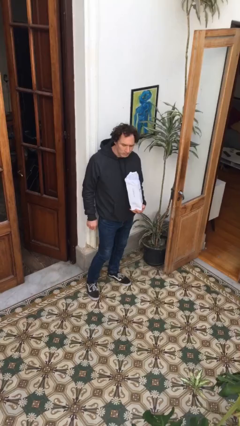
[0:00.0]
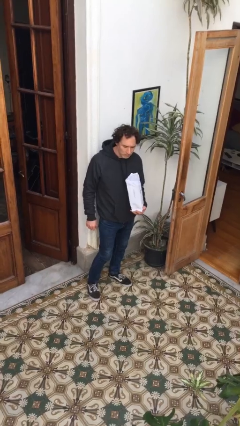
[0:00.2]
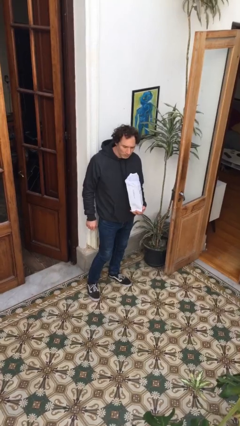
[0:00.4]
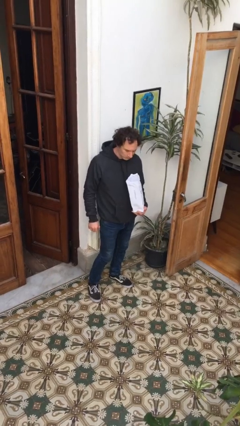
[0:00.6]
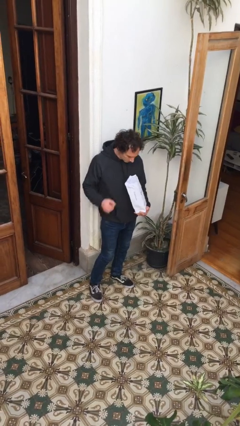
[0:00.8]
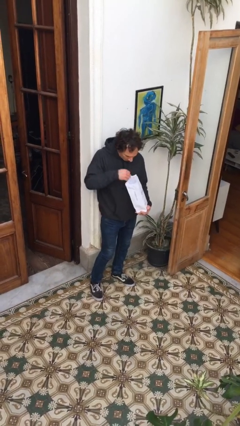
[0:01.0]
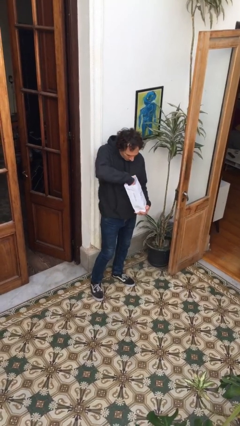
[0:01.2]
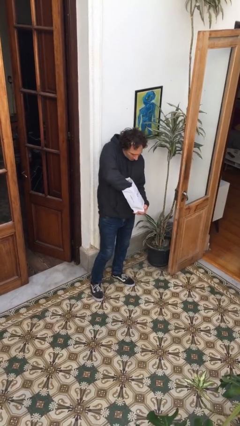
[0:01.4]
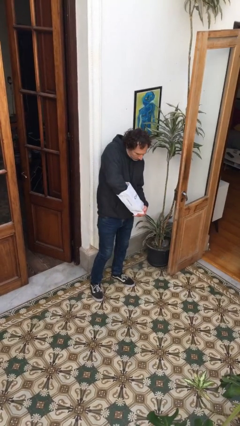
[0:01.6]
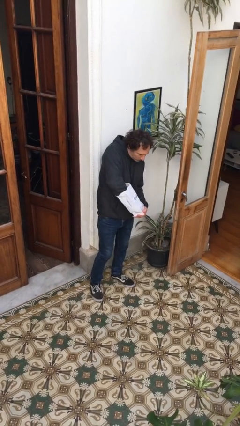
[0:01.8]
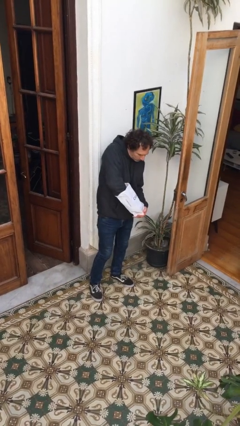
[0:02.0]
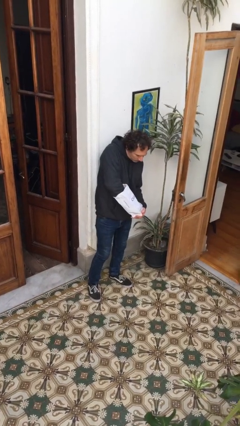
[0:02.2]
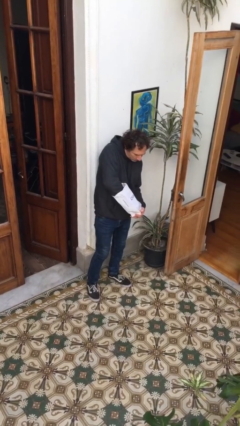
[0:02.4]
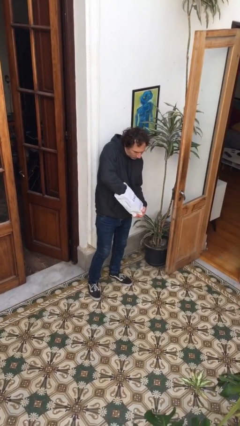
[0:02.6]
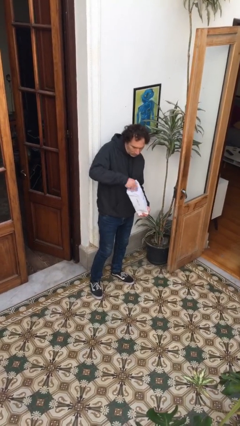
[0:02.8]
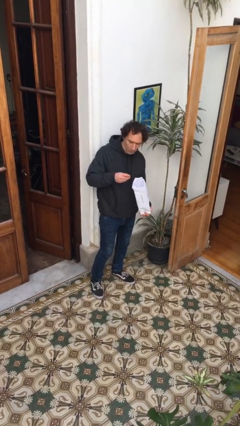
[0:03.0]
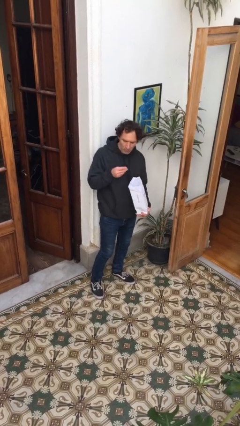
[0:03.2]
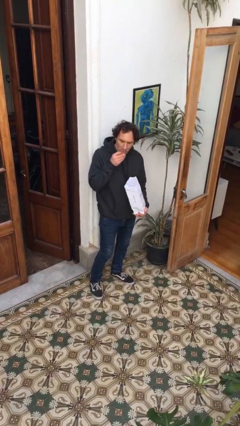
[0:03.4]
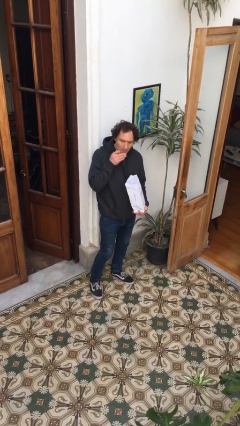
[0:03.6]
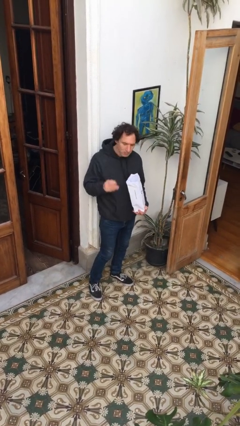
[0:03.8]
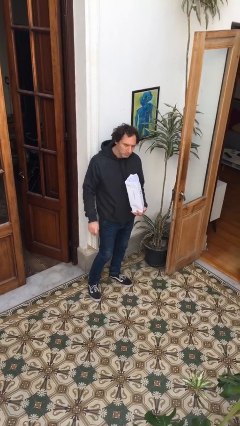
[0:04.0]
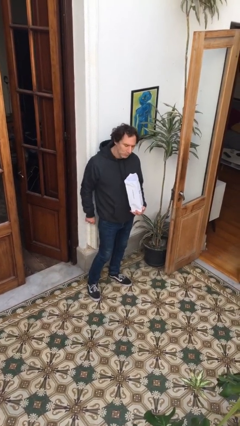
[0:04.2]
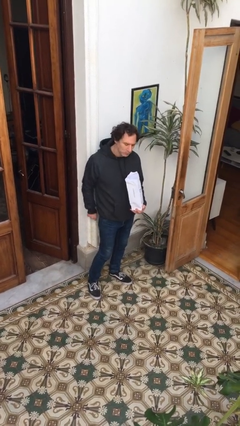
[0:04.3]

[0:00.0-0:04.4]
person eats snack from bag

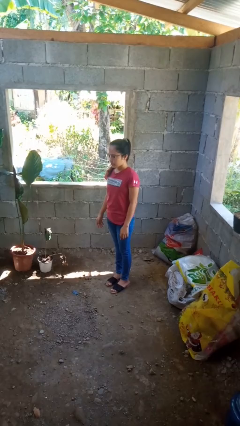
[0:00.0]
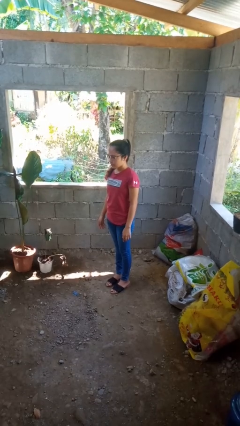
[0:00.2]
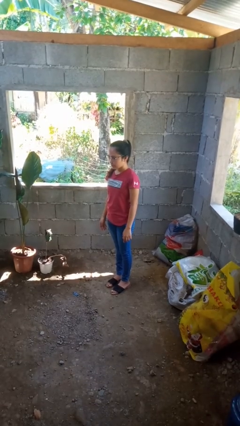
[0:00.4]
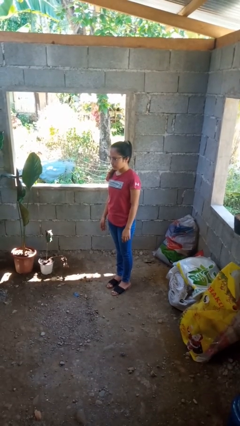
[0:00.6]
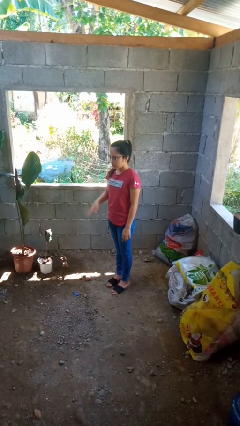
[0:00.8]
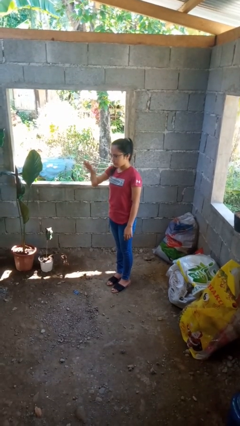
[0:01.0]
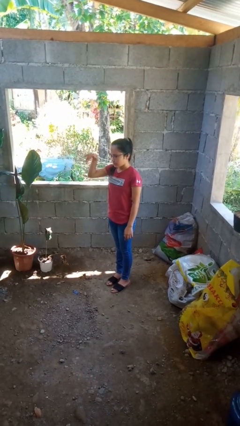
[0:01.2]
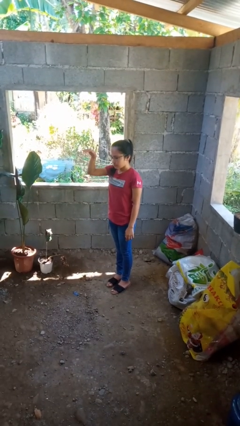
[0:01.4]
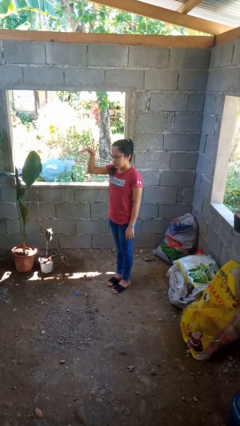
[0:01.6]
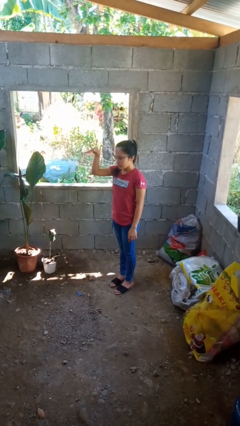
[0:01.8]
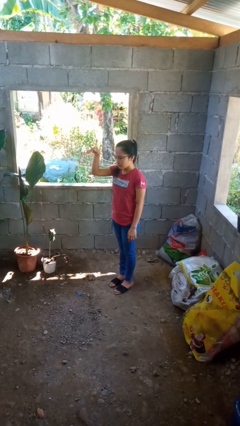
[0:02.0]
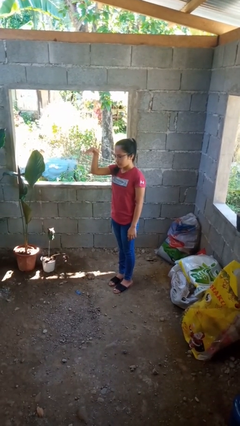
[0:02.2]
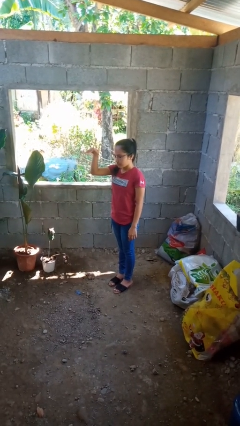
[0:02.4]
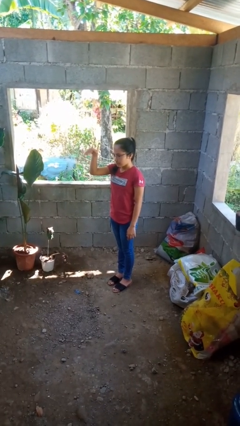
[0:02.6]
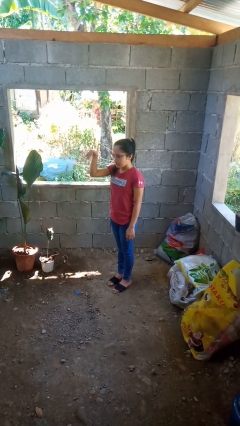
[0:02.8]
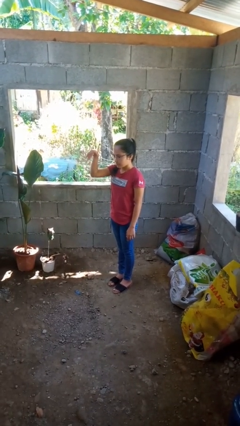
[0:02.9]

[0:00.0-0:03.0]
person gestures come here

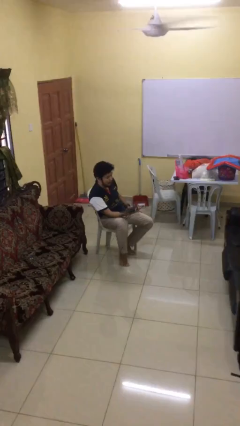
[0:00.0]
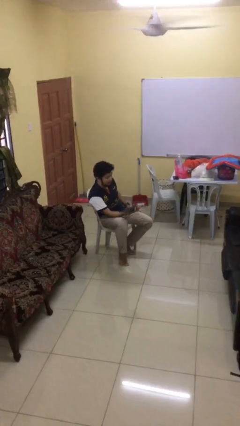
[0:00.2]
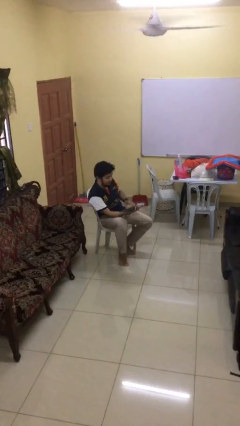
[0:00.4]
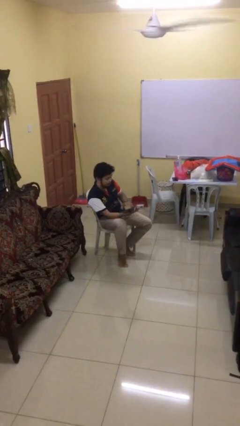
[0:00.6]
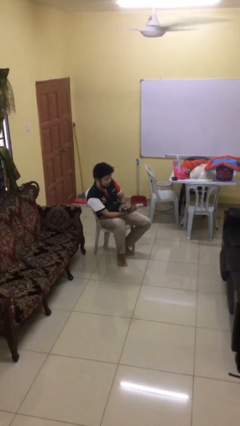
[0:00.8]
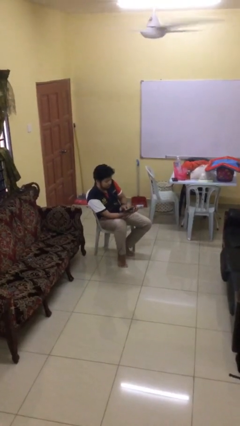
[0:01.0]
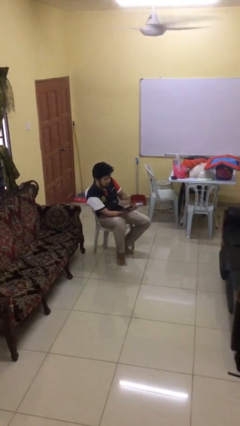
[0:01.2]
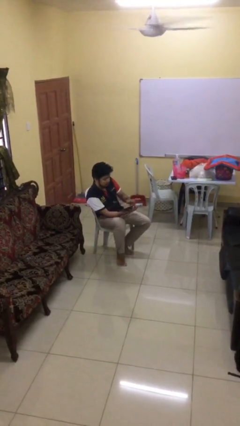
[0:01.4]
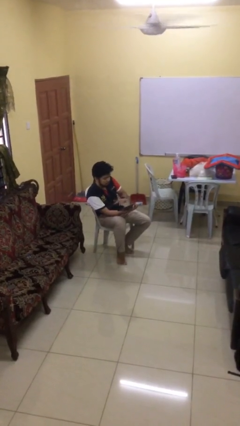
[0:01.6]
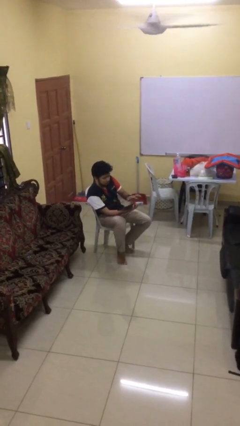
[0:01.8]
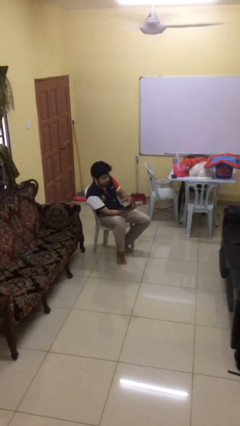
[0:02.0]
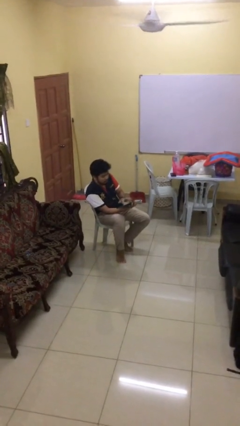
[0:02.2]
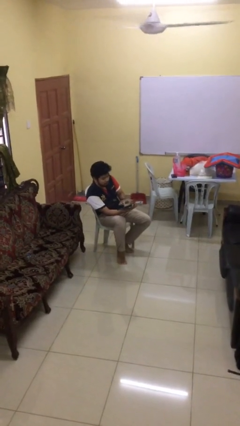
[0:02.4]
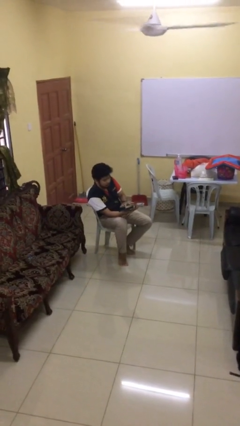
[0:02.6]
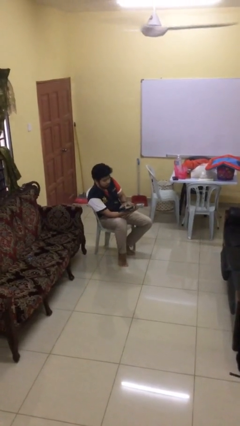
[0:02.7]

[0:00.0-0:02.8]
person interacts with tablet

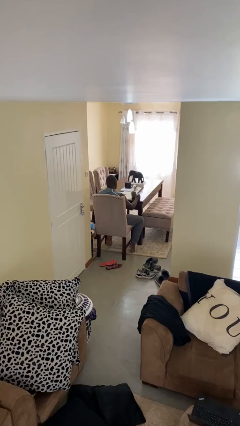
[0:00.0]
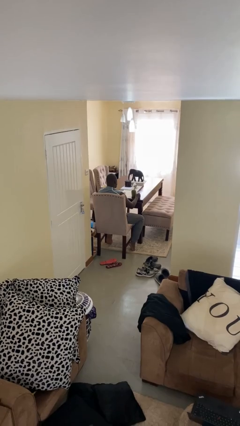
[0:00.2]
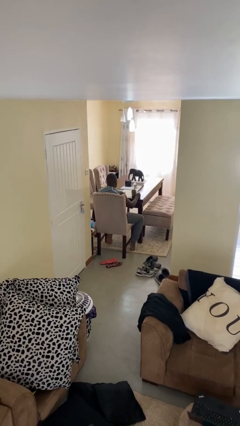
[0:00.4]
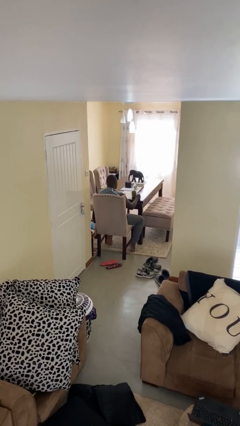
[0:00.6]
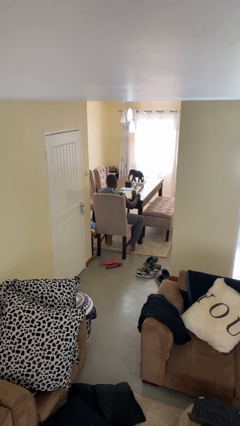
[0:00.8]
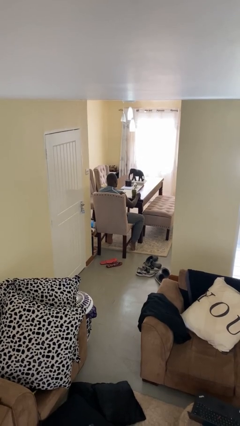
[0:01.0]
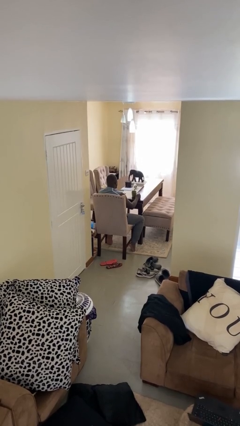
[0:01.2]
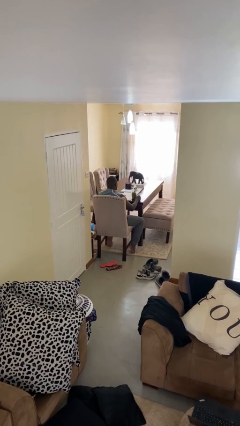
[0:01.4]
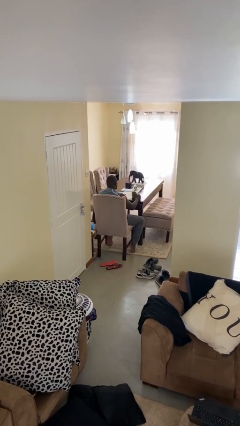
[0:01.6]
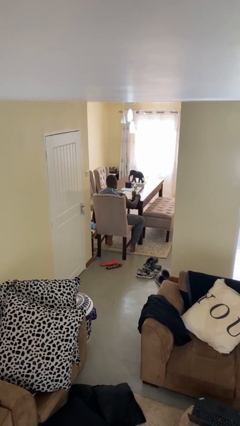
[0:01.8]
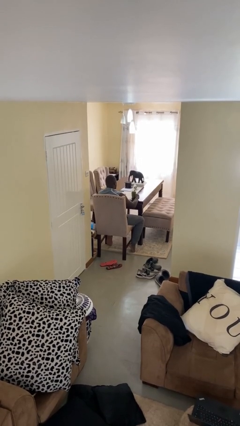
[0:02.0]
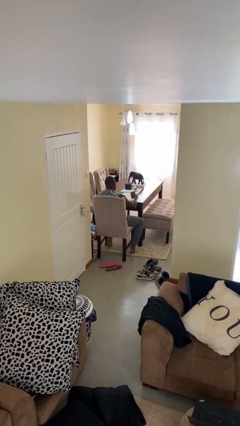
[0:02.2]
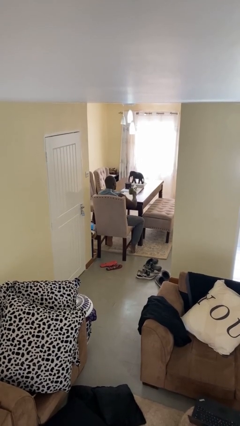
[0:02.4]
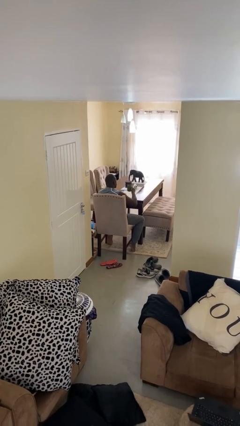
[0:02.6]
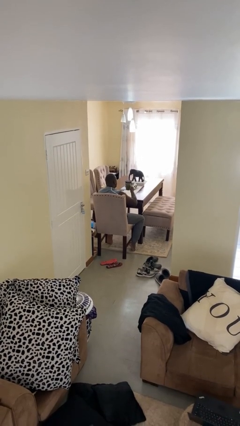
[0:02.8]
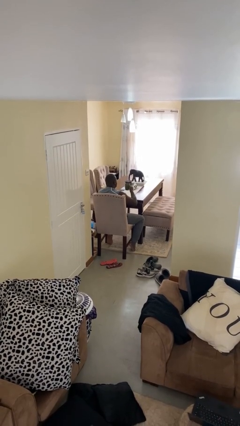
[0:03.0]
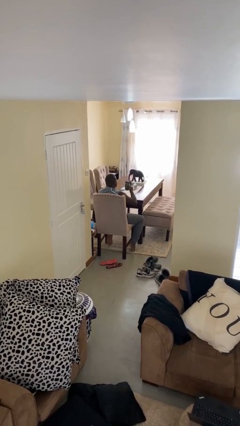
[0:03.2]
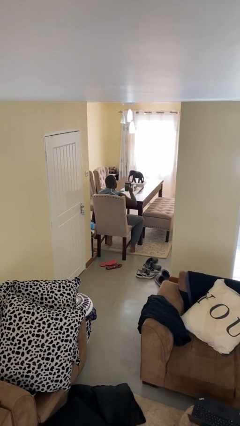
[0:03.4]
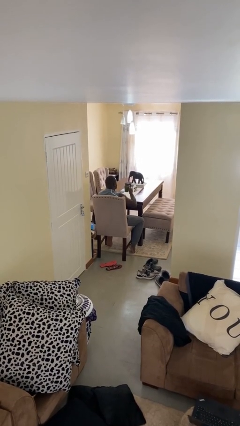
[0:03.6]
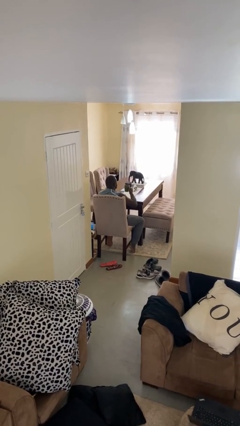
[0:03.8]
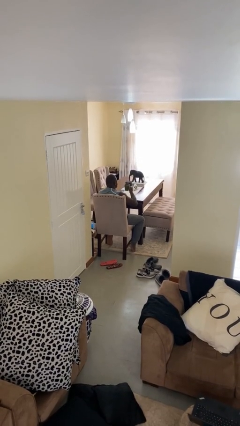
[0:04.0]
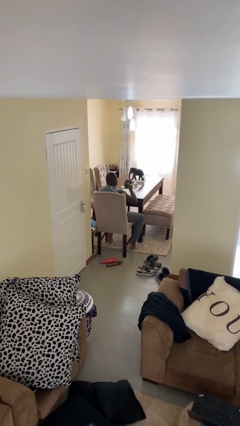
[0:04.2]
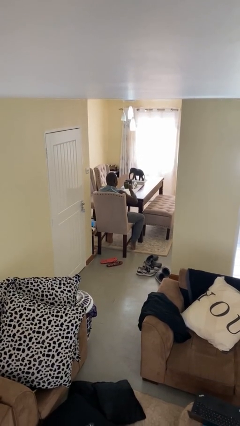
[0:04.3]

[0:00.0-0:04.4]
person picks up object from table

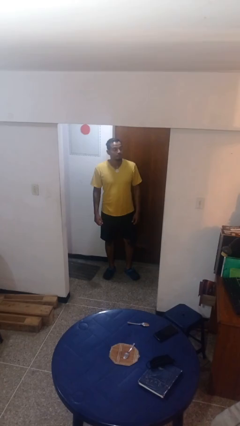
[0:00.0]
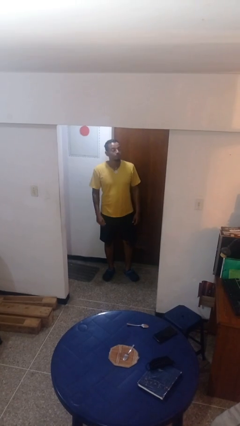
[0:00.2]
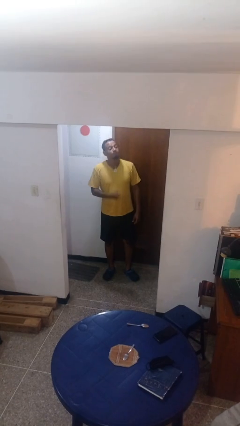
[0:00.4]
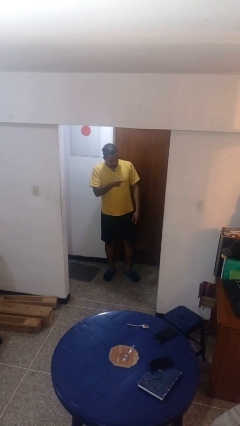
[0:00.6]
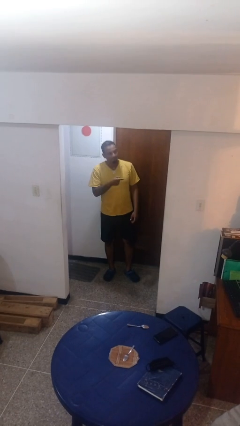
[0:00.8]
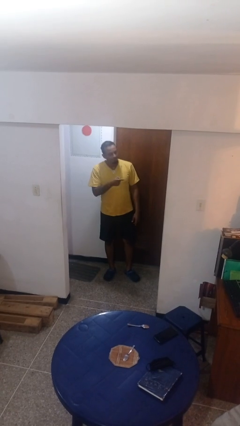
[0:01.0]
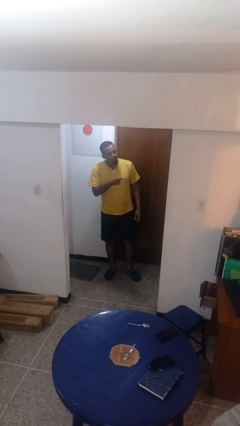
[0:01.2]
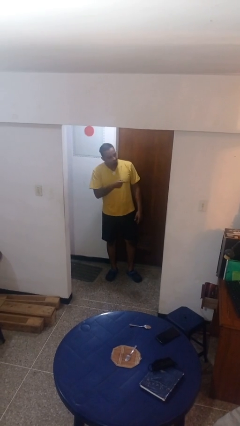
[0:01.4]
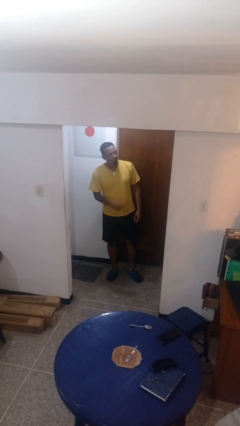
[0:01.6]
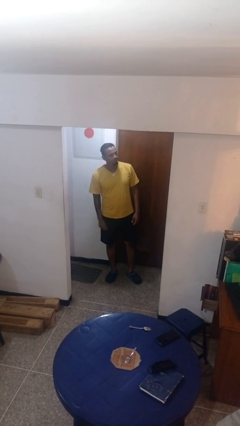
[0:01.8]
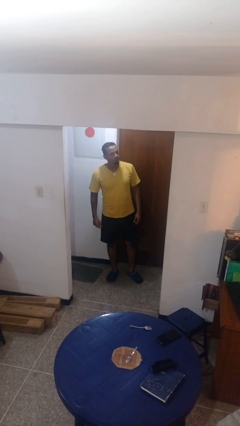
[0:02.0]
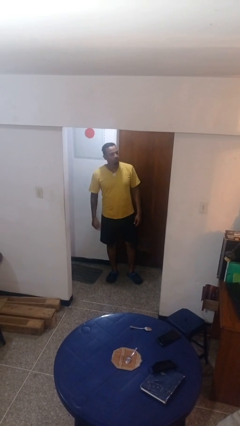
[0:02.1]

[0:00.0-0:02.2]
person nods head

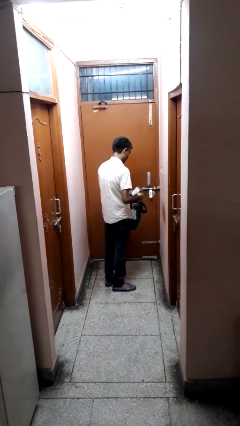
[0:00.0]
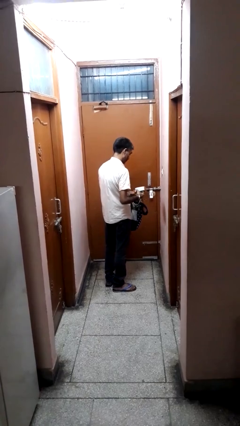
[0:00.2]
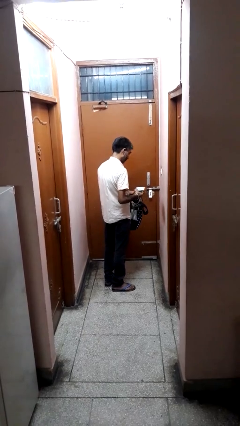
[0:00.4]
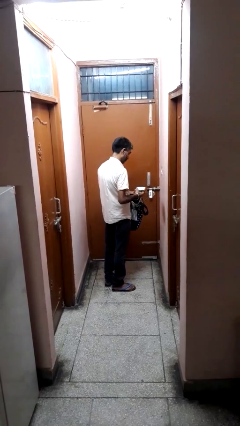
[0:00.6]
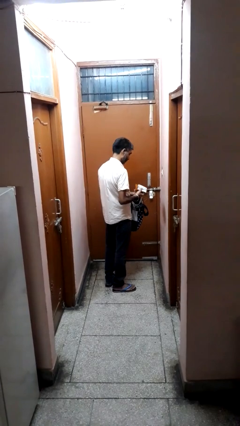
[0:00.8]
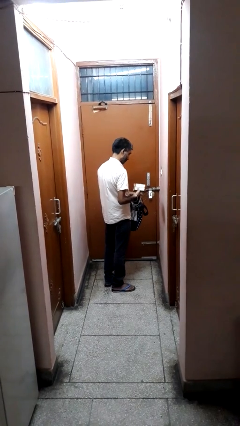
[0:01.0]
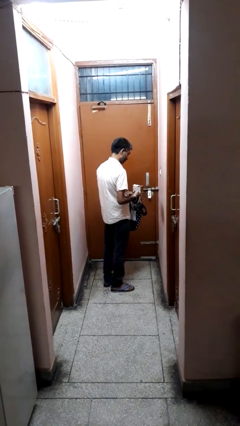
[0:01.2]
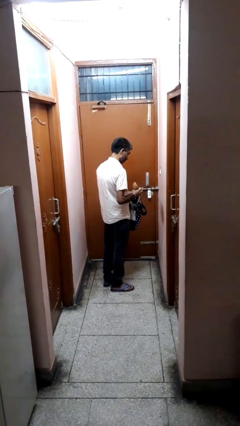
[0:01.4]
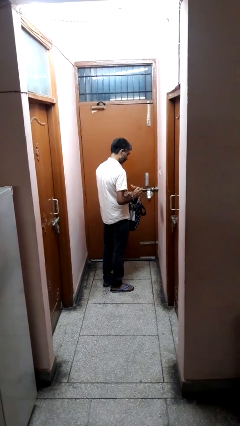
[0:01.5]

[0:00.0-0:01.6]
person takes object from bag
